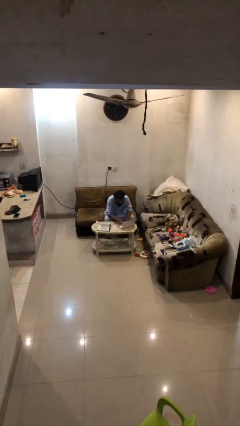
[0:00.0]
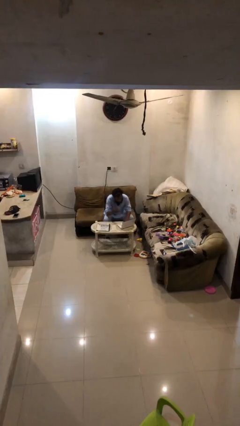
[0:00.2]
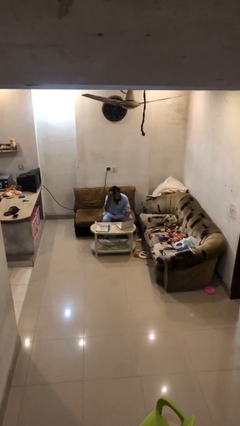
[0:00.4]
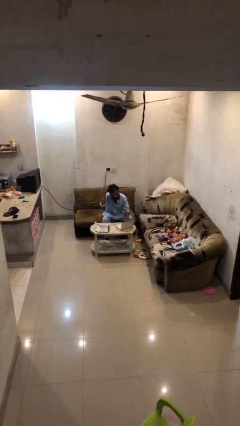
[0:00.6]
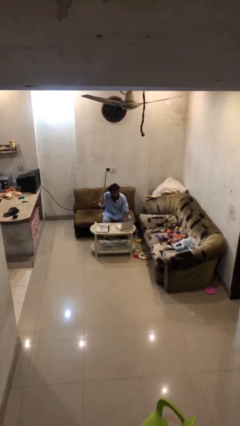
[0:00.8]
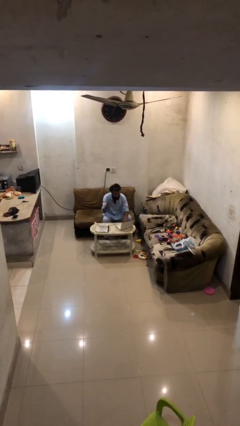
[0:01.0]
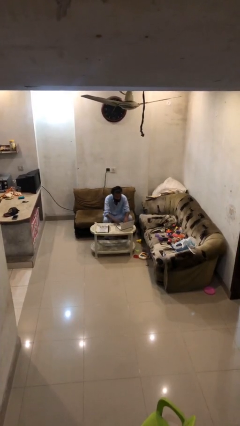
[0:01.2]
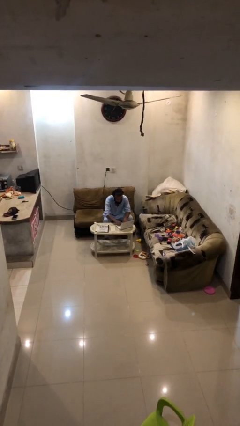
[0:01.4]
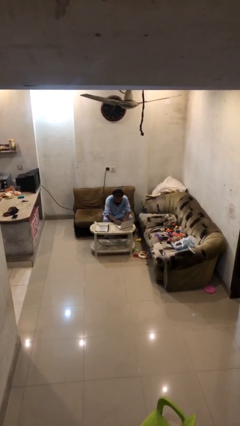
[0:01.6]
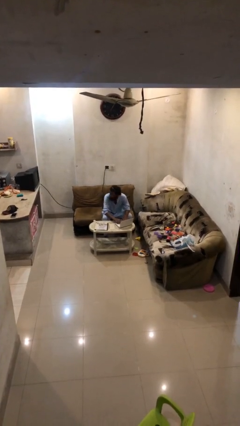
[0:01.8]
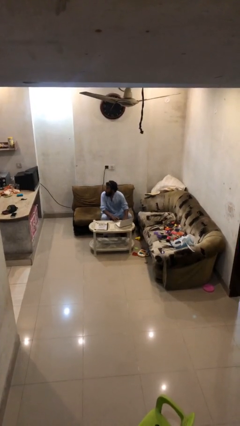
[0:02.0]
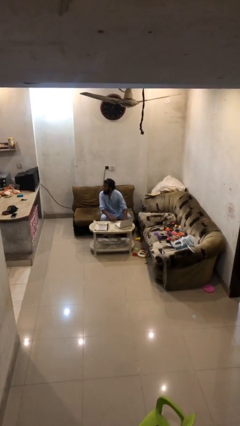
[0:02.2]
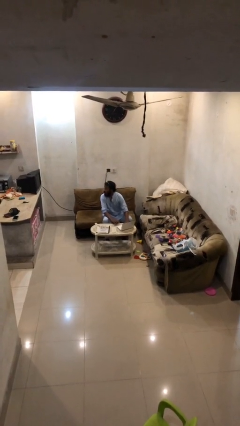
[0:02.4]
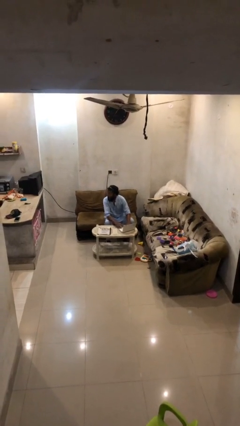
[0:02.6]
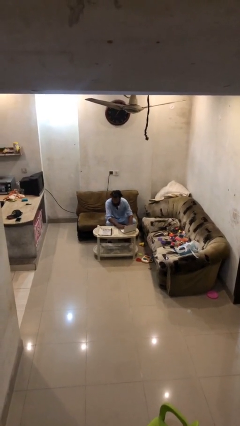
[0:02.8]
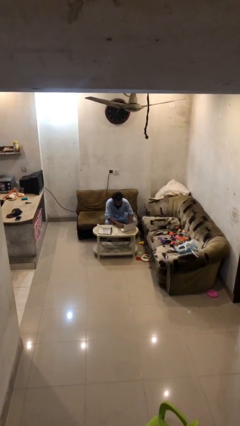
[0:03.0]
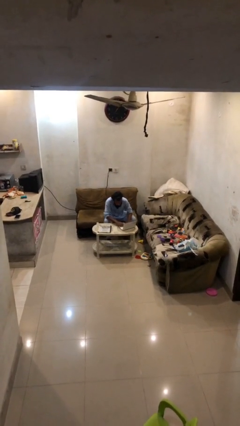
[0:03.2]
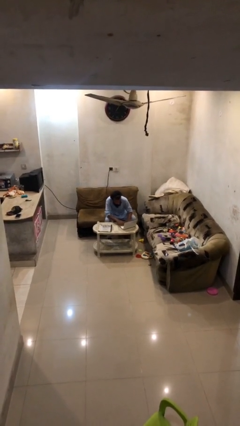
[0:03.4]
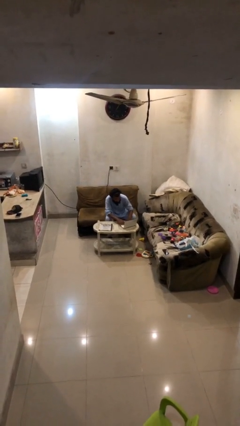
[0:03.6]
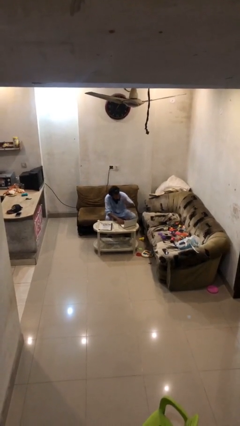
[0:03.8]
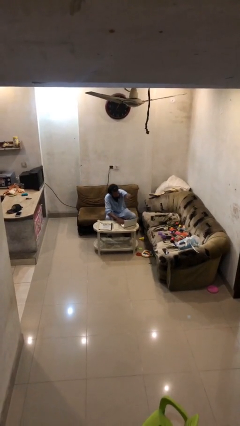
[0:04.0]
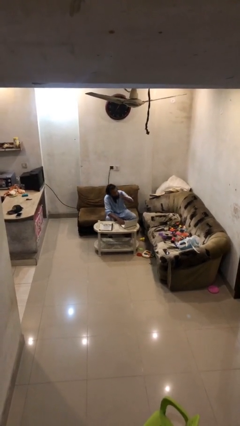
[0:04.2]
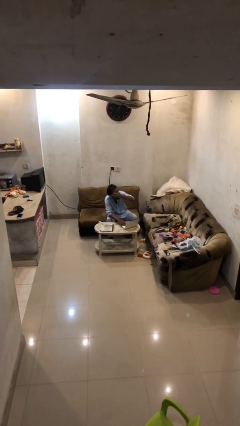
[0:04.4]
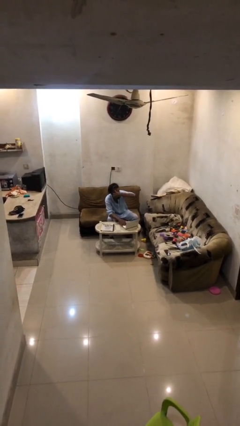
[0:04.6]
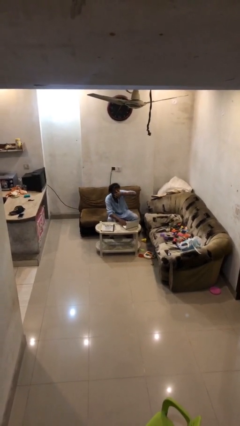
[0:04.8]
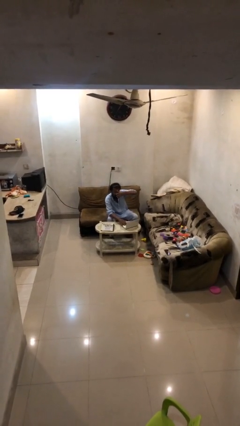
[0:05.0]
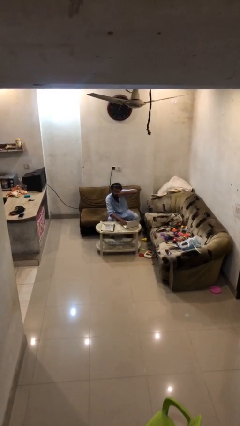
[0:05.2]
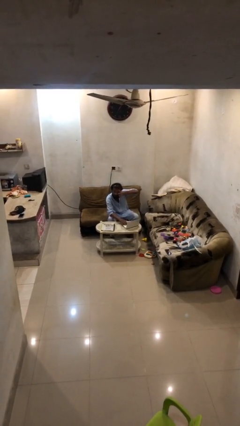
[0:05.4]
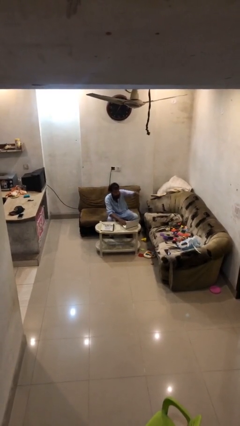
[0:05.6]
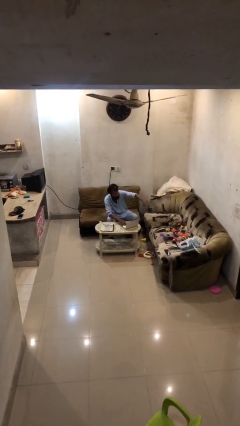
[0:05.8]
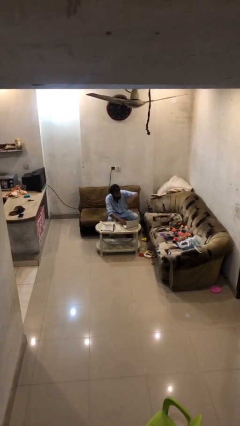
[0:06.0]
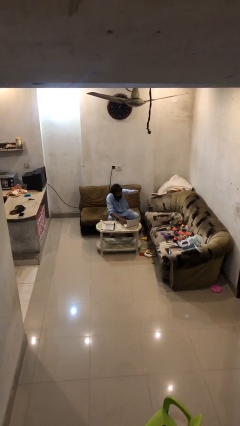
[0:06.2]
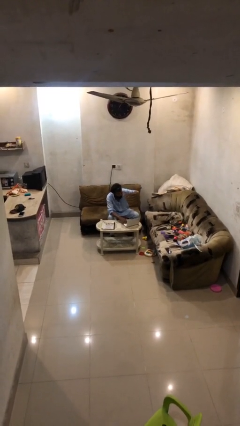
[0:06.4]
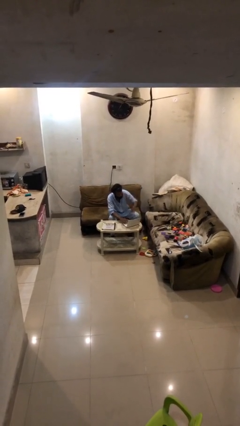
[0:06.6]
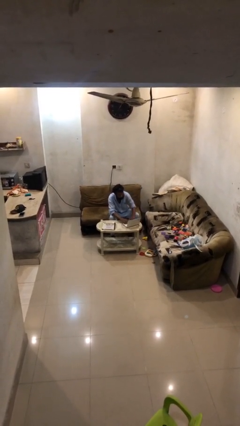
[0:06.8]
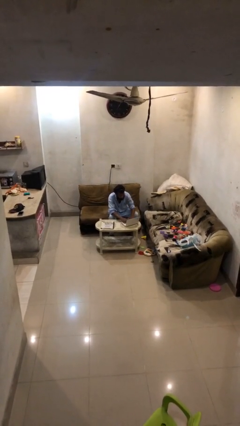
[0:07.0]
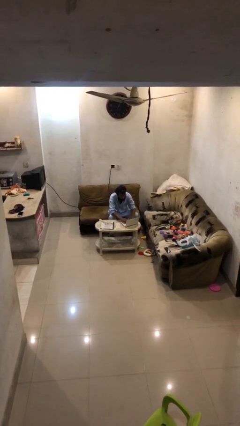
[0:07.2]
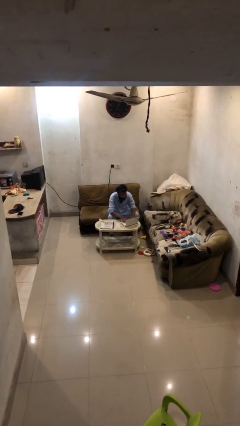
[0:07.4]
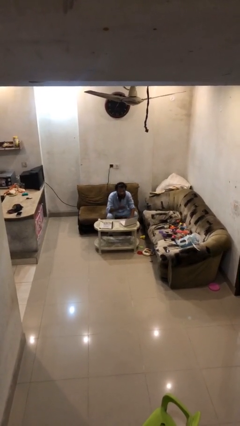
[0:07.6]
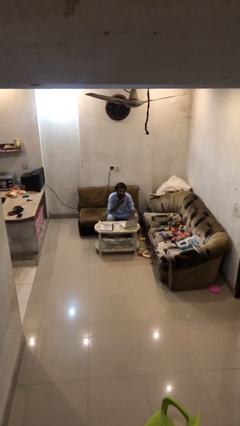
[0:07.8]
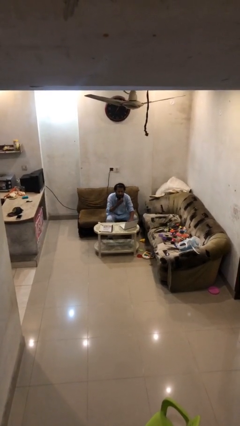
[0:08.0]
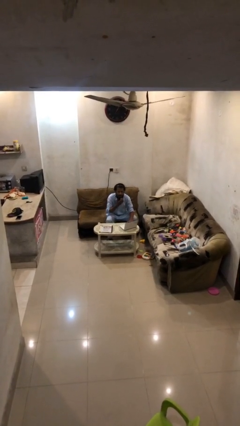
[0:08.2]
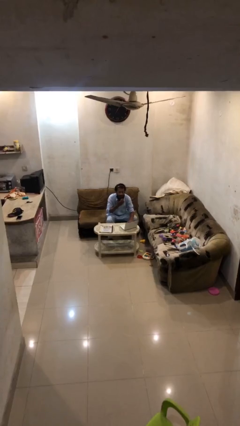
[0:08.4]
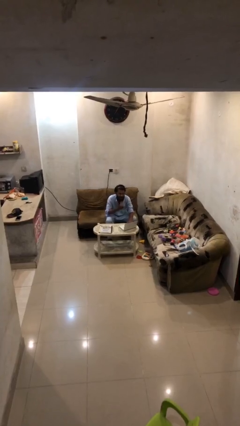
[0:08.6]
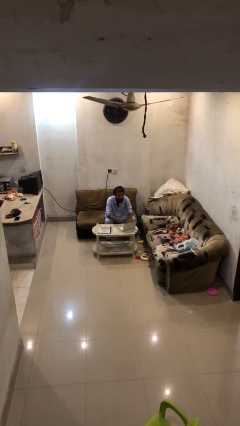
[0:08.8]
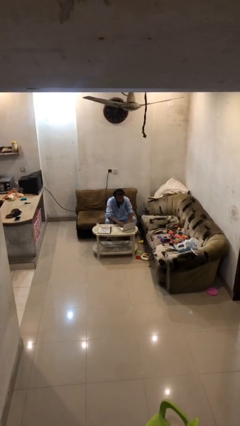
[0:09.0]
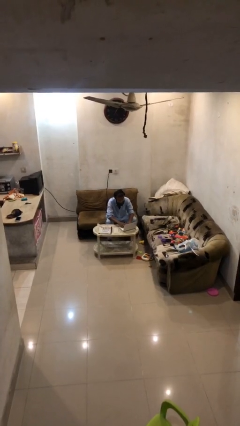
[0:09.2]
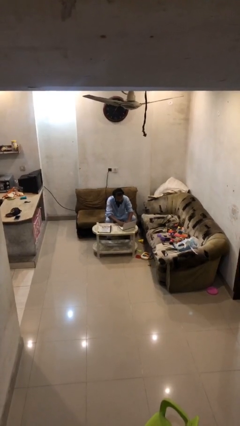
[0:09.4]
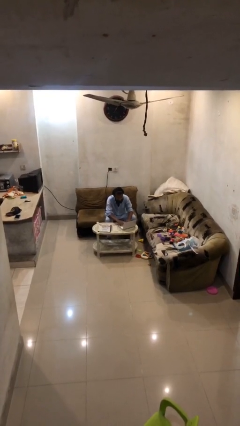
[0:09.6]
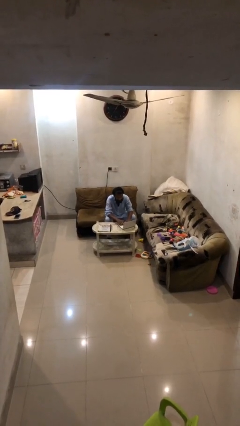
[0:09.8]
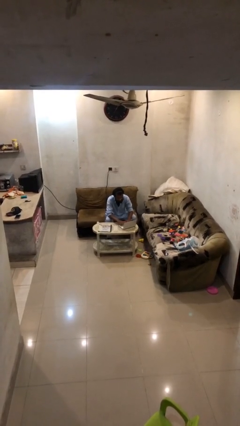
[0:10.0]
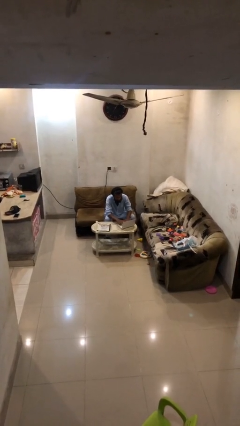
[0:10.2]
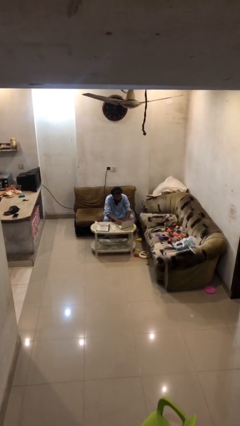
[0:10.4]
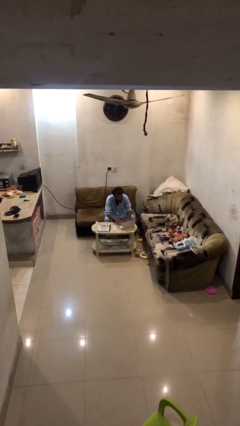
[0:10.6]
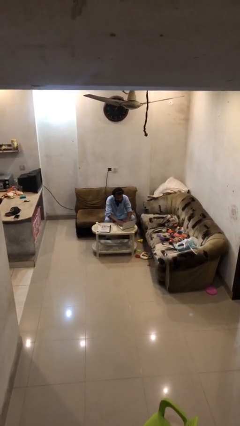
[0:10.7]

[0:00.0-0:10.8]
person interacts with laptop

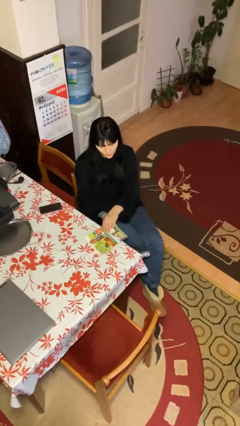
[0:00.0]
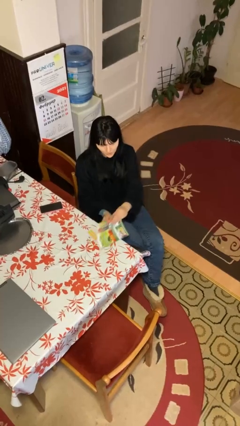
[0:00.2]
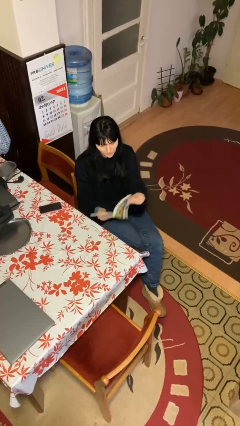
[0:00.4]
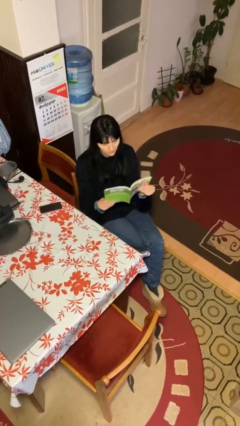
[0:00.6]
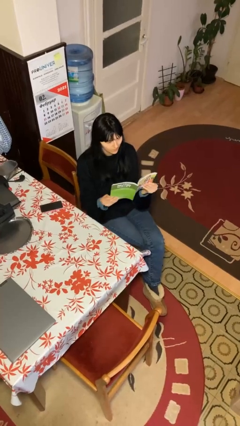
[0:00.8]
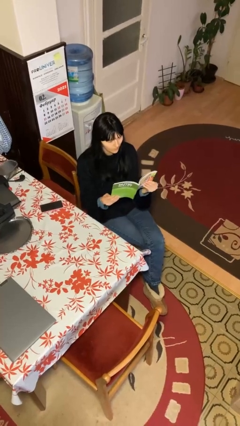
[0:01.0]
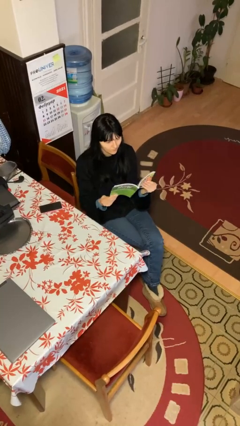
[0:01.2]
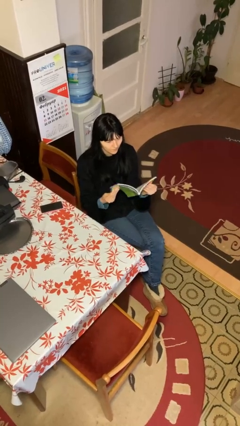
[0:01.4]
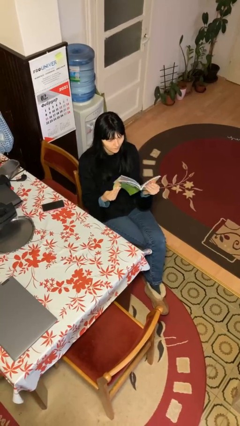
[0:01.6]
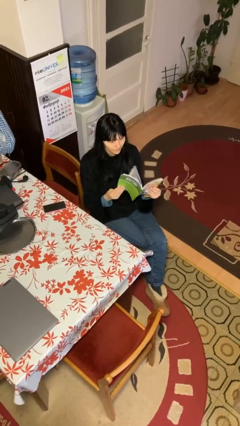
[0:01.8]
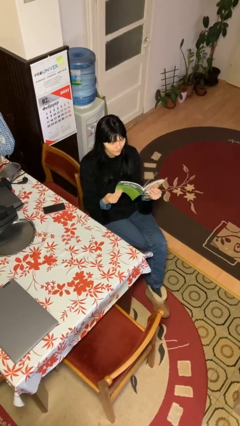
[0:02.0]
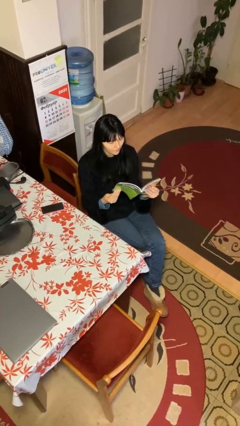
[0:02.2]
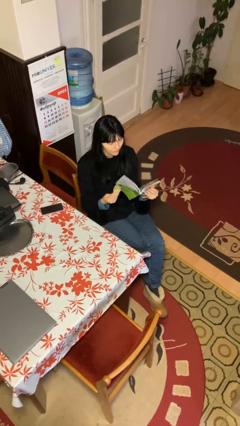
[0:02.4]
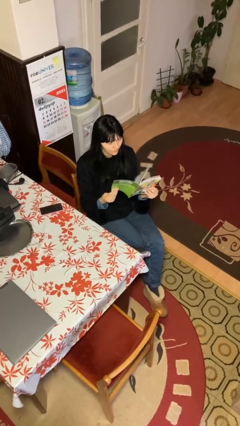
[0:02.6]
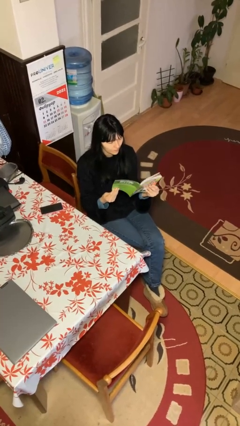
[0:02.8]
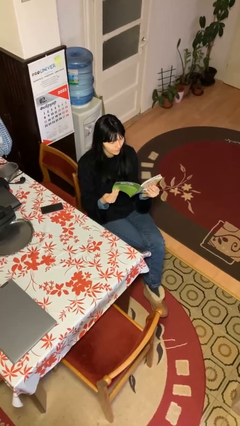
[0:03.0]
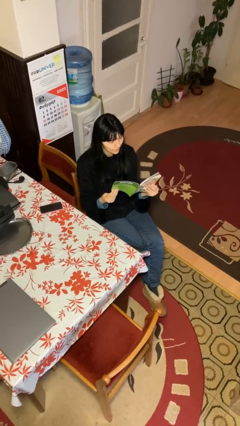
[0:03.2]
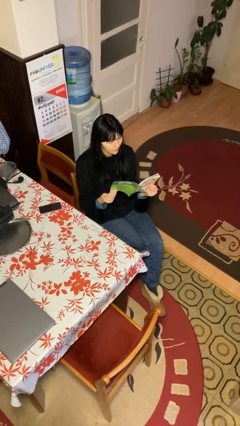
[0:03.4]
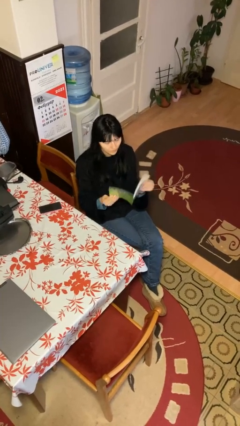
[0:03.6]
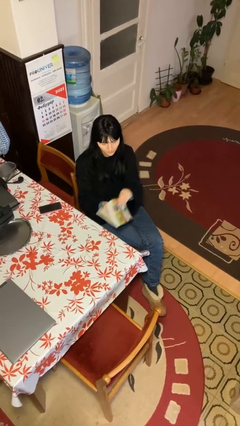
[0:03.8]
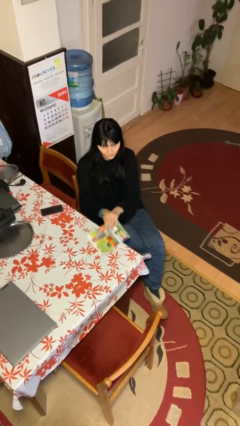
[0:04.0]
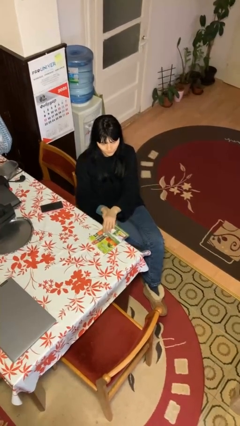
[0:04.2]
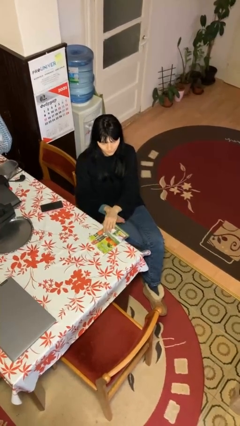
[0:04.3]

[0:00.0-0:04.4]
person reads document

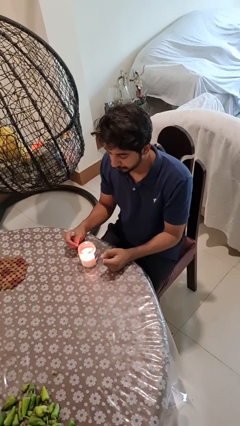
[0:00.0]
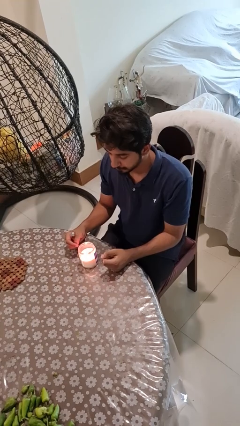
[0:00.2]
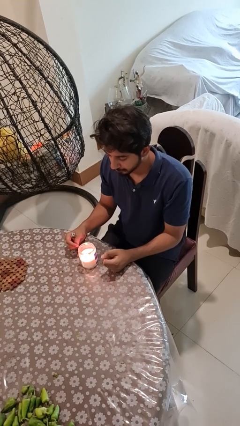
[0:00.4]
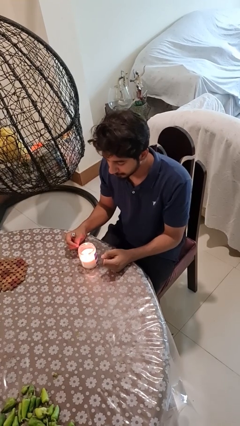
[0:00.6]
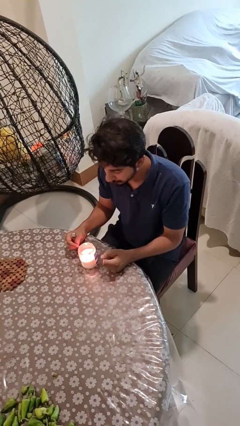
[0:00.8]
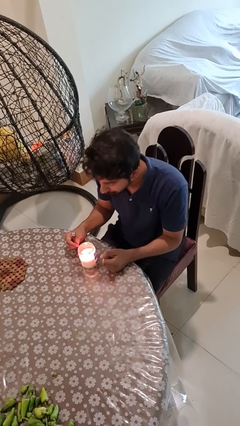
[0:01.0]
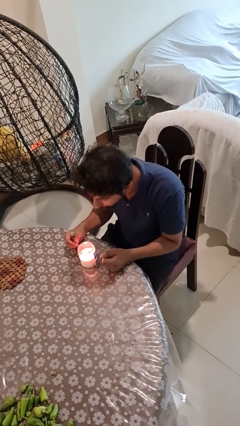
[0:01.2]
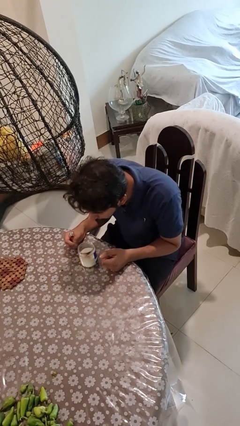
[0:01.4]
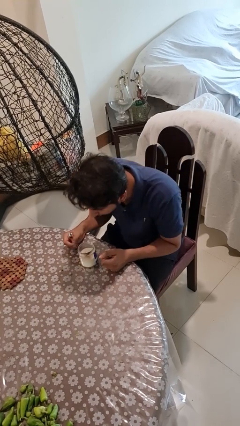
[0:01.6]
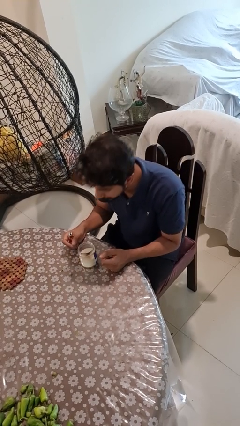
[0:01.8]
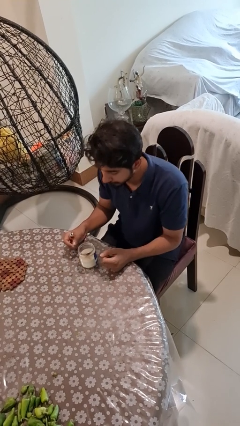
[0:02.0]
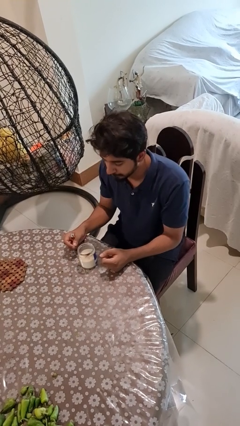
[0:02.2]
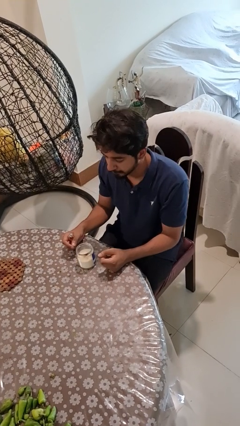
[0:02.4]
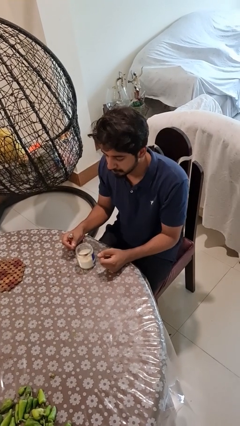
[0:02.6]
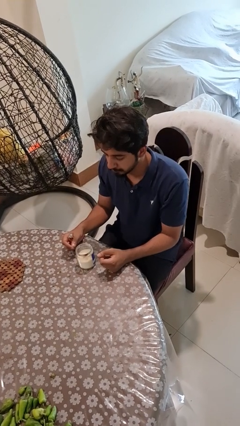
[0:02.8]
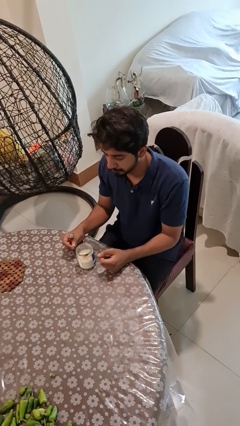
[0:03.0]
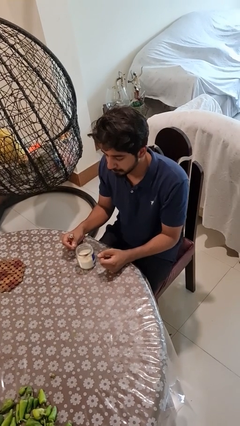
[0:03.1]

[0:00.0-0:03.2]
person extinguishes candle
